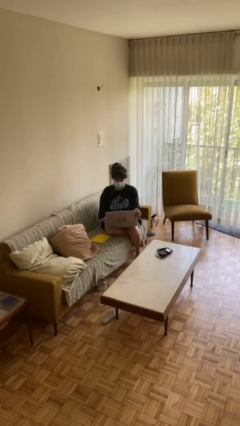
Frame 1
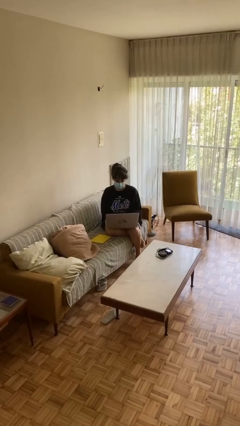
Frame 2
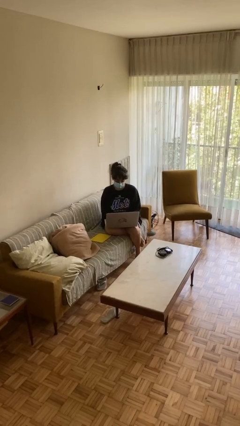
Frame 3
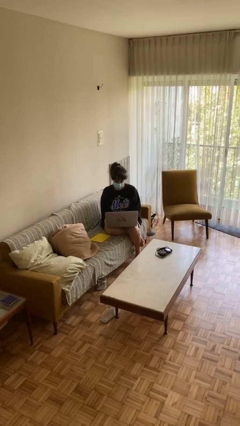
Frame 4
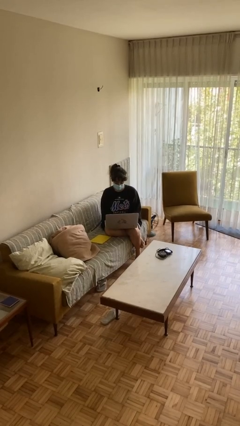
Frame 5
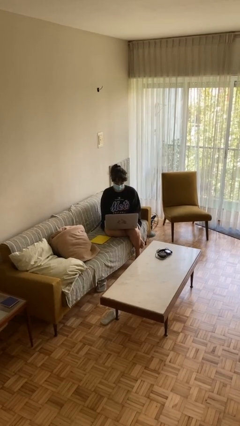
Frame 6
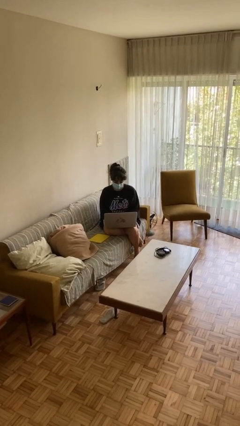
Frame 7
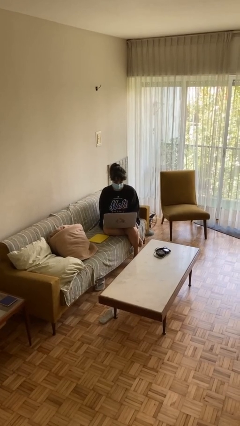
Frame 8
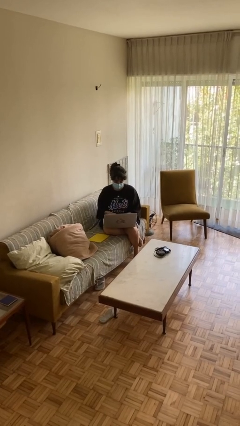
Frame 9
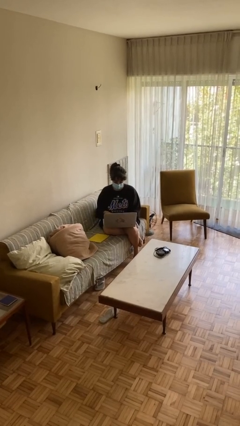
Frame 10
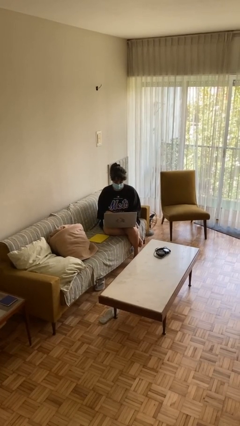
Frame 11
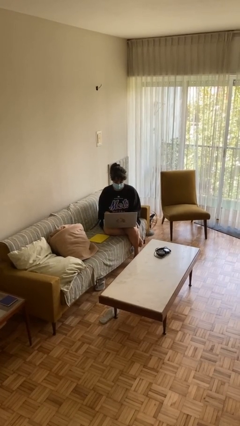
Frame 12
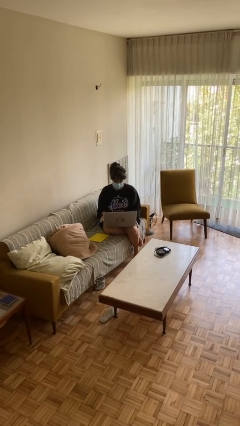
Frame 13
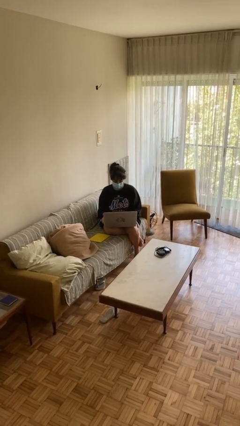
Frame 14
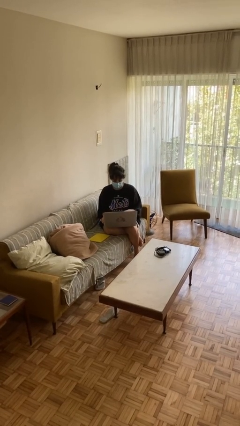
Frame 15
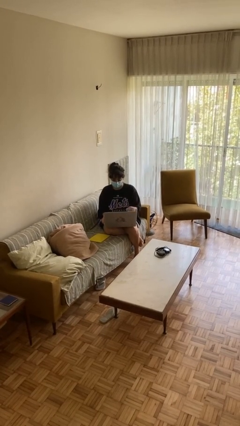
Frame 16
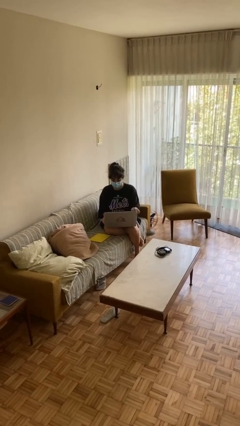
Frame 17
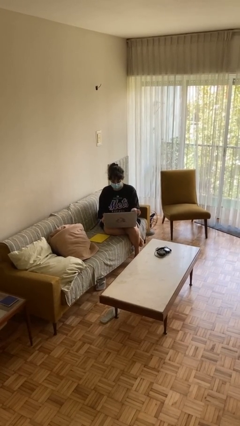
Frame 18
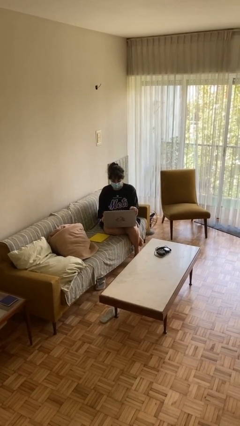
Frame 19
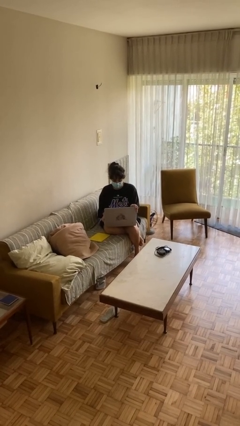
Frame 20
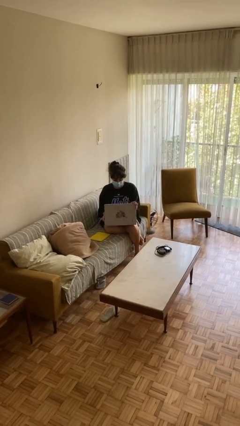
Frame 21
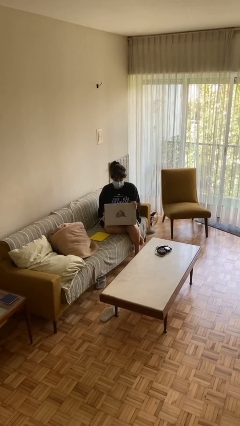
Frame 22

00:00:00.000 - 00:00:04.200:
person interacts with laptop

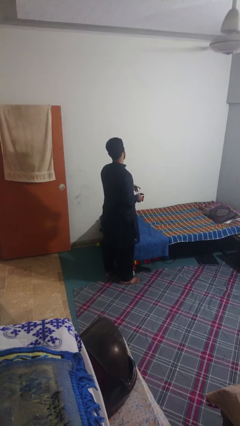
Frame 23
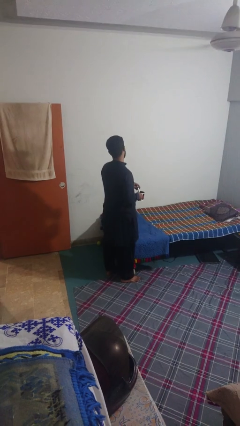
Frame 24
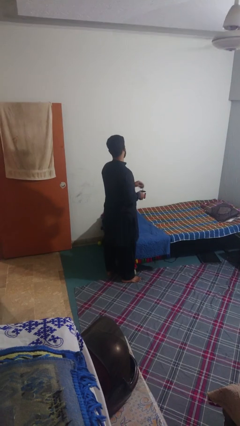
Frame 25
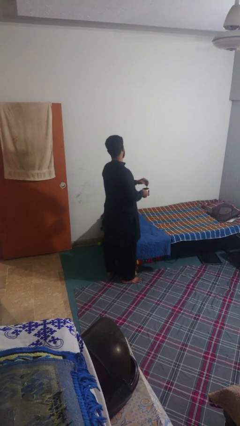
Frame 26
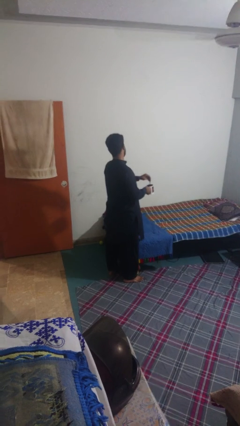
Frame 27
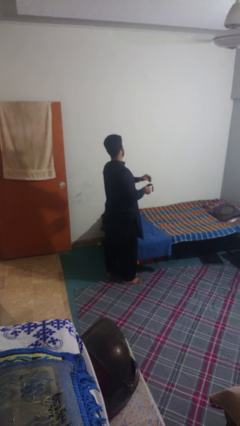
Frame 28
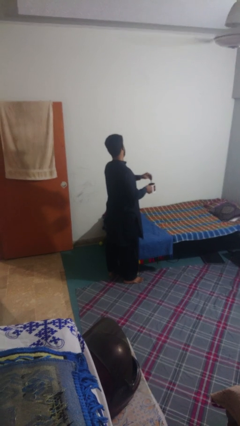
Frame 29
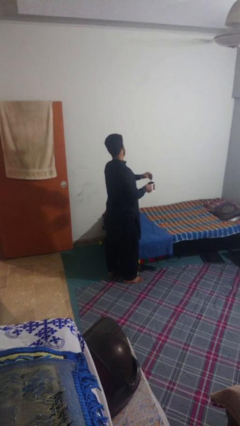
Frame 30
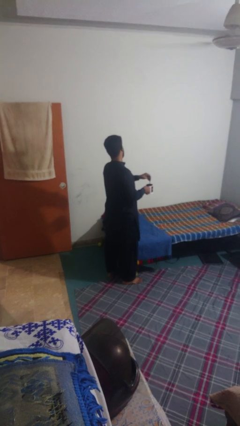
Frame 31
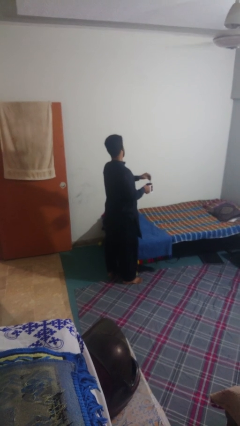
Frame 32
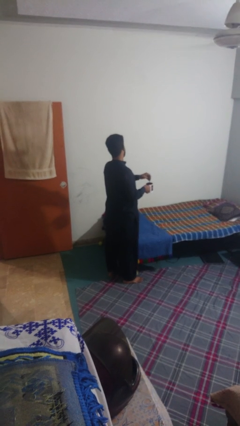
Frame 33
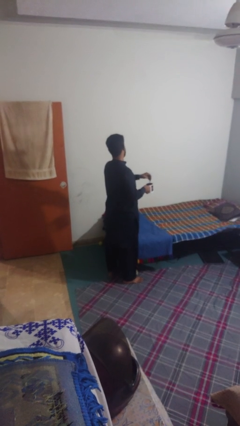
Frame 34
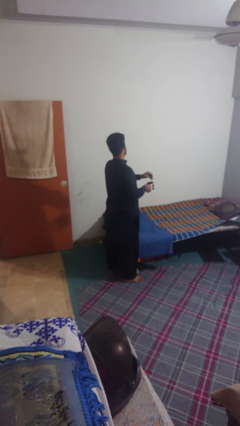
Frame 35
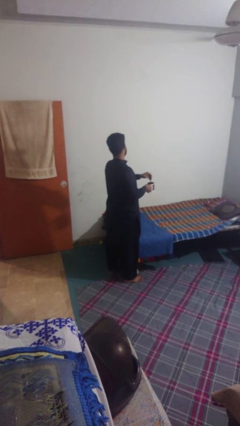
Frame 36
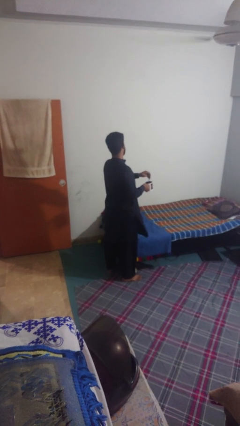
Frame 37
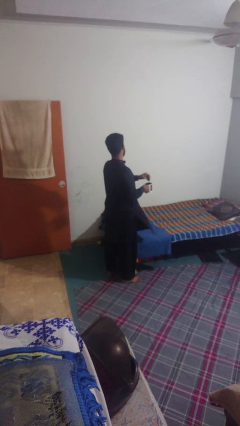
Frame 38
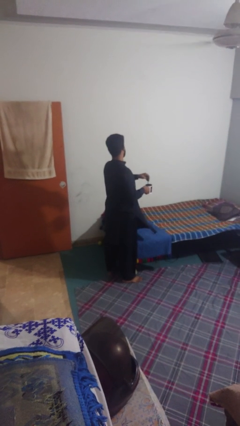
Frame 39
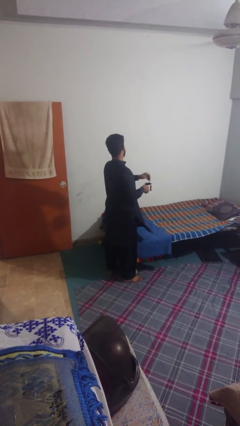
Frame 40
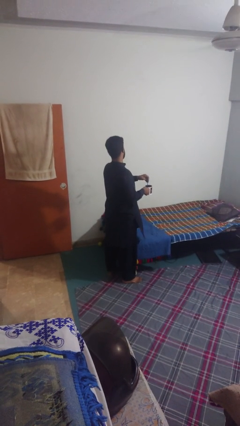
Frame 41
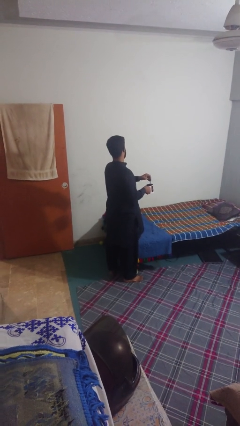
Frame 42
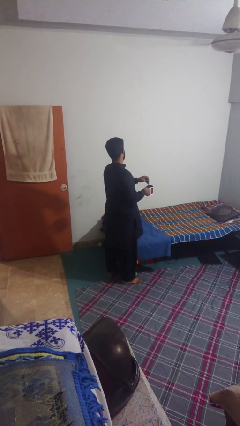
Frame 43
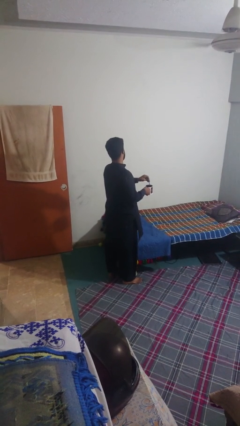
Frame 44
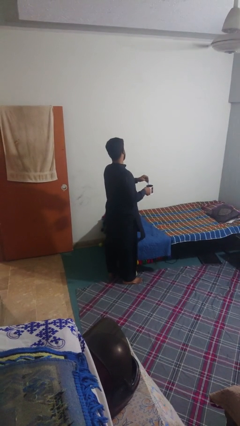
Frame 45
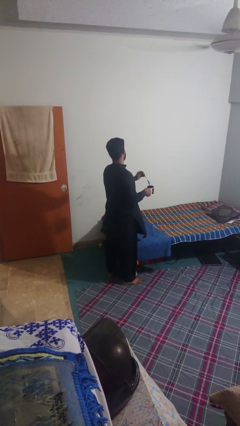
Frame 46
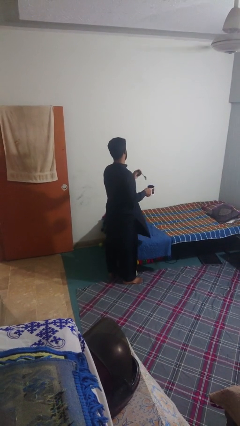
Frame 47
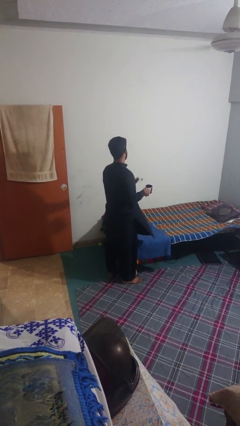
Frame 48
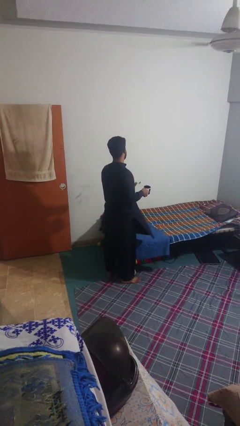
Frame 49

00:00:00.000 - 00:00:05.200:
person stirs mug

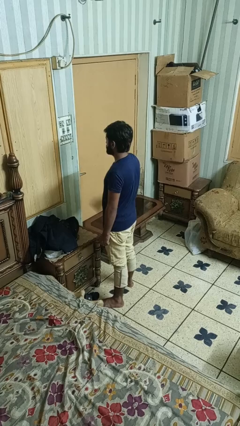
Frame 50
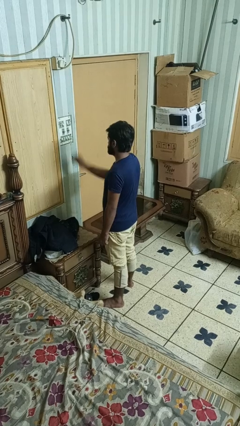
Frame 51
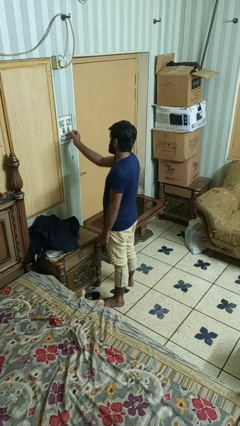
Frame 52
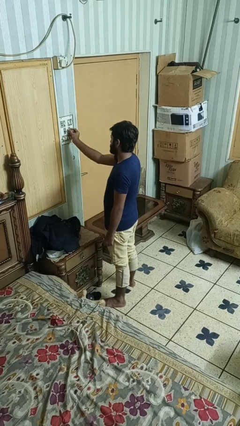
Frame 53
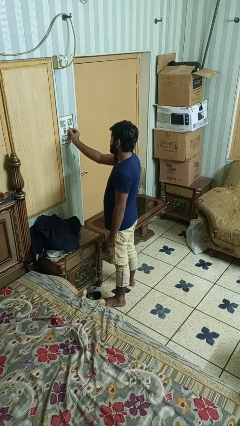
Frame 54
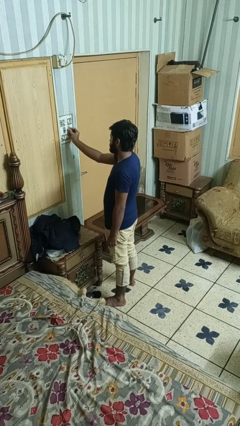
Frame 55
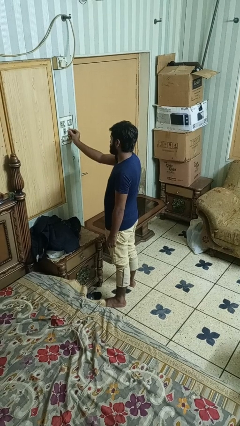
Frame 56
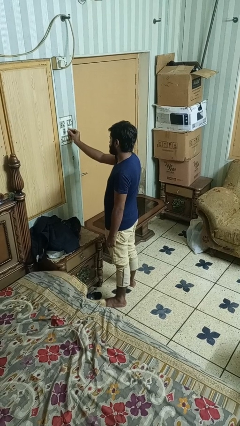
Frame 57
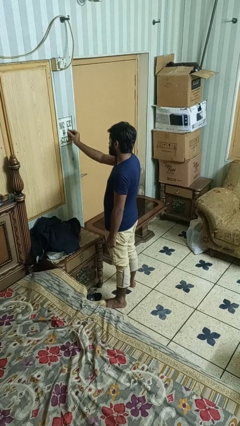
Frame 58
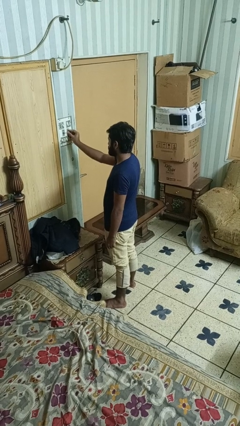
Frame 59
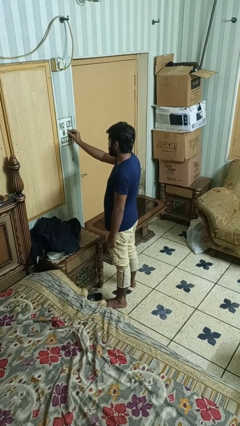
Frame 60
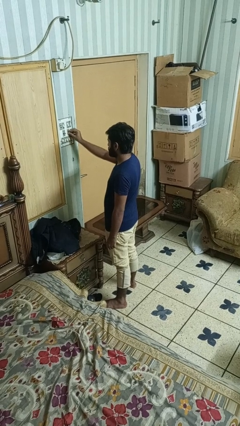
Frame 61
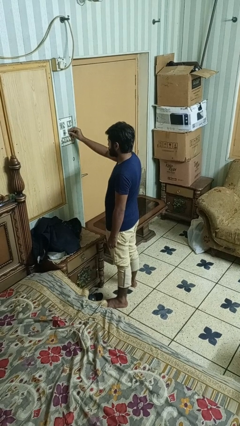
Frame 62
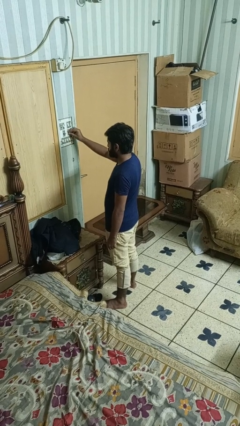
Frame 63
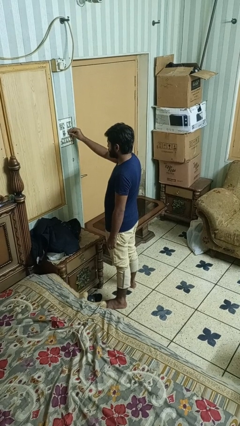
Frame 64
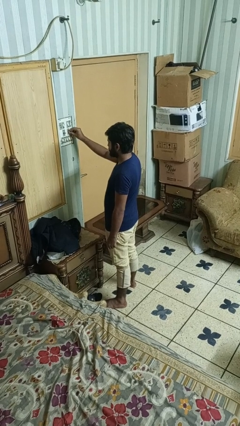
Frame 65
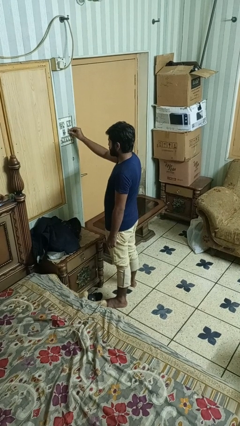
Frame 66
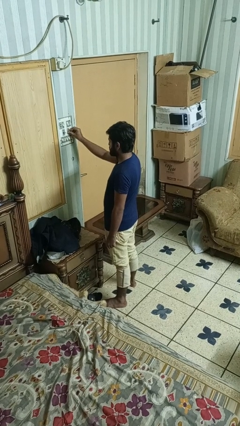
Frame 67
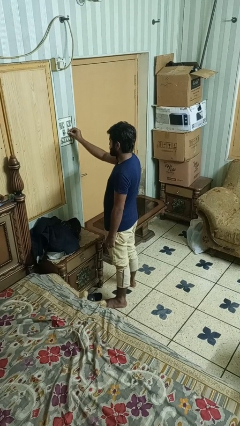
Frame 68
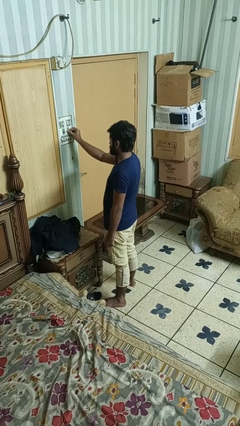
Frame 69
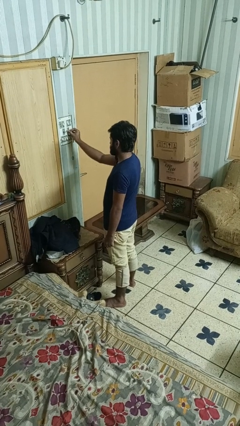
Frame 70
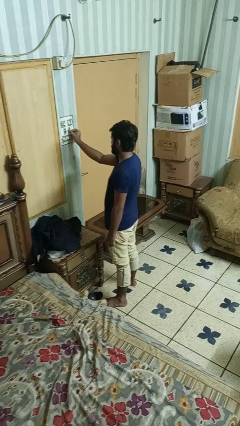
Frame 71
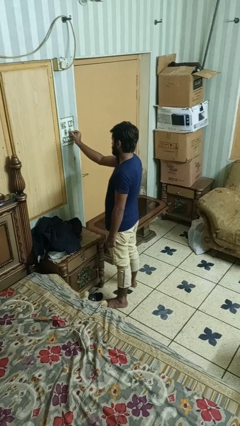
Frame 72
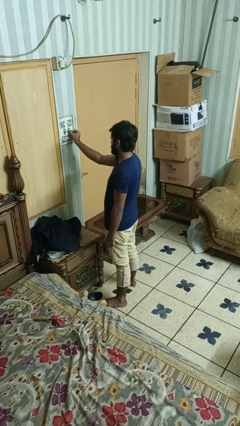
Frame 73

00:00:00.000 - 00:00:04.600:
person adjusts thermostat

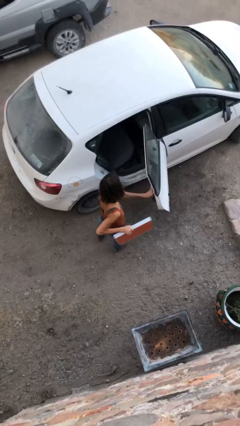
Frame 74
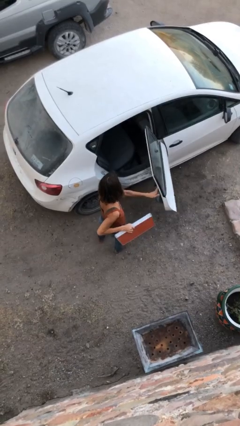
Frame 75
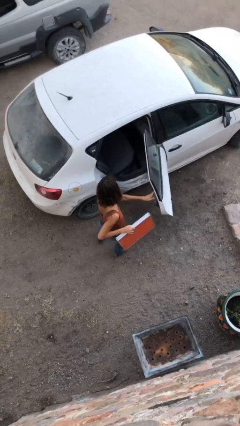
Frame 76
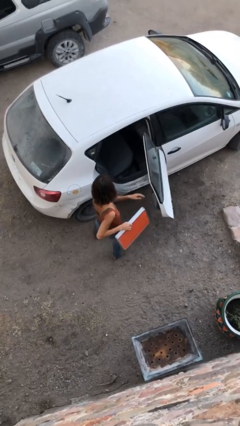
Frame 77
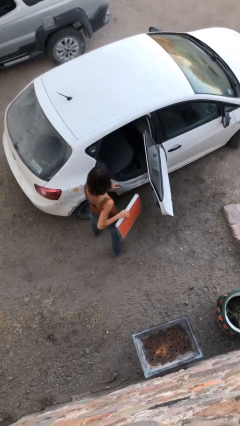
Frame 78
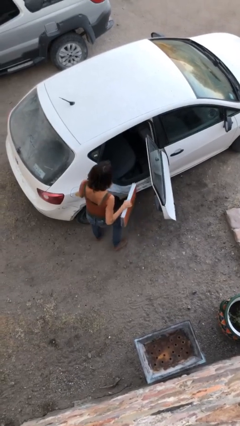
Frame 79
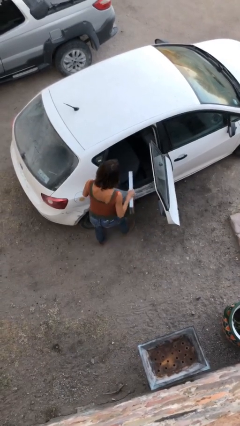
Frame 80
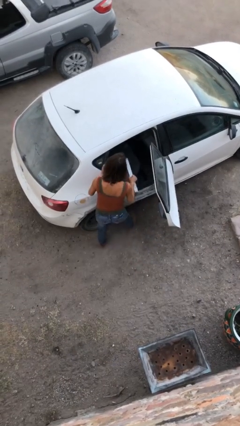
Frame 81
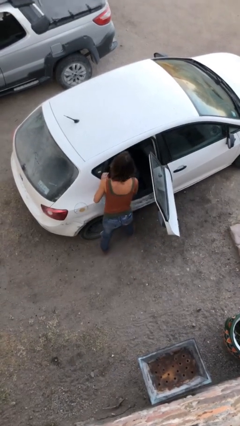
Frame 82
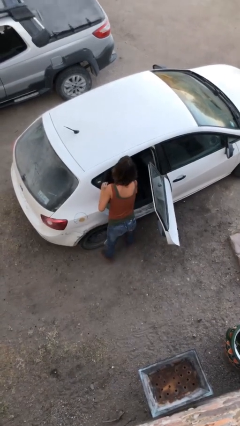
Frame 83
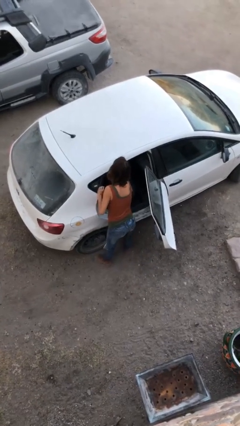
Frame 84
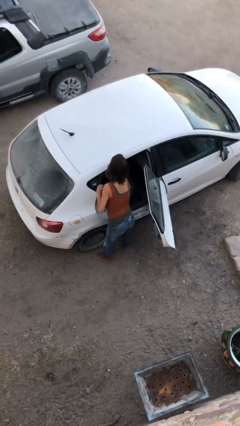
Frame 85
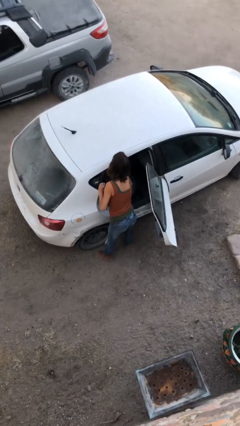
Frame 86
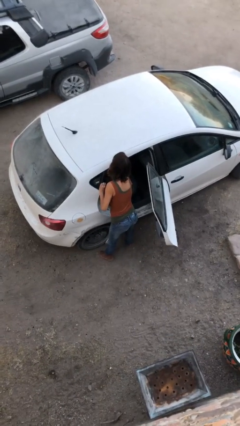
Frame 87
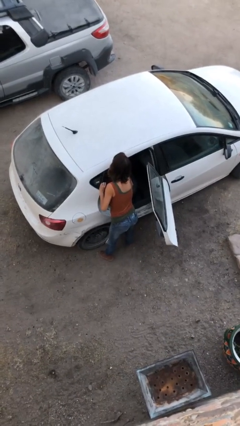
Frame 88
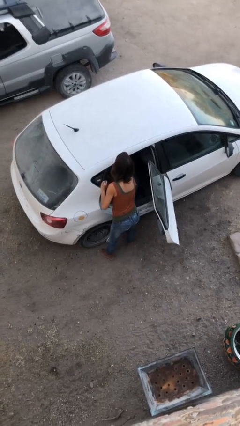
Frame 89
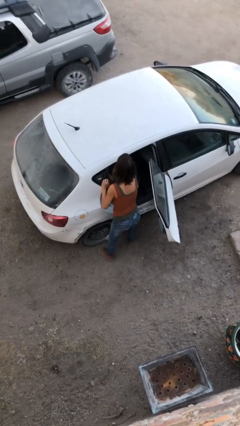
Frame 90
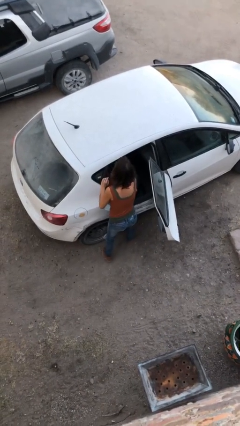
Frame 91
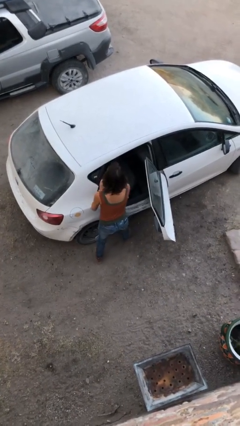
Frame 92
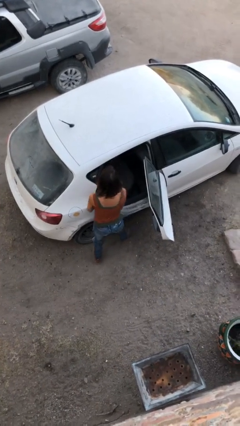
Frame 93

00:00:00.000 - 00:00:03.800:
person loads car

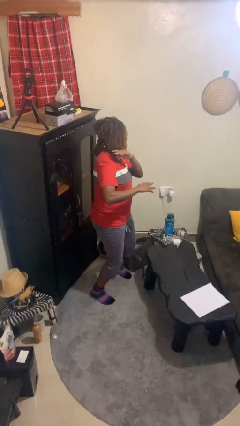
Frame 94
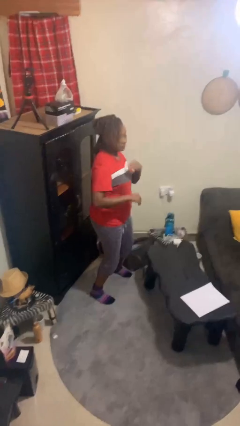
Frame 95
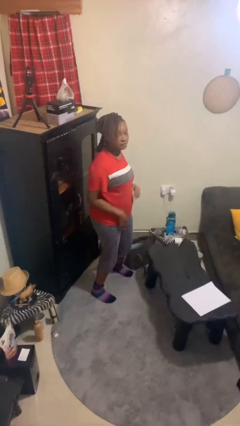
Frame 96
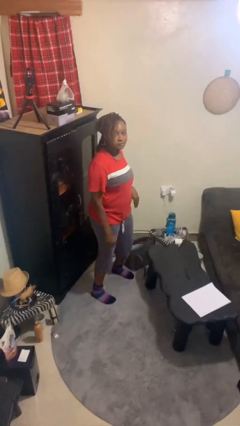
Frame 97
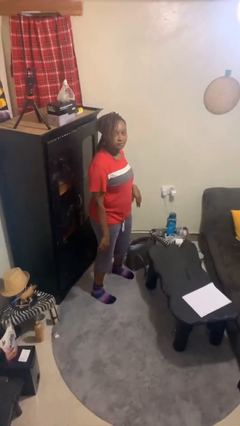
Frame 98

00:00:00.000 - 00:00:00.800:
person karate chop
